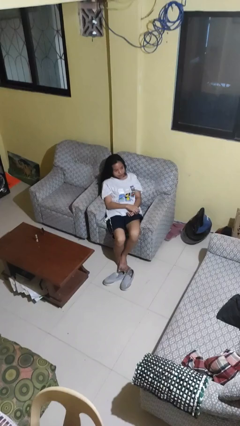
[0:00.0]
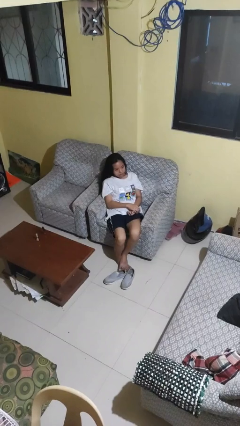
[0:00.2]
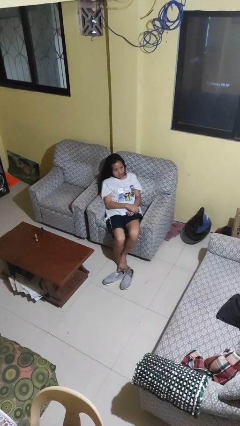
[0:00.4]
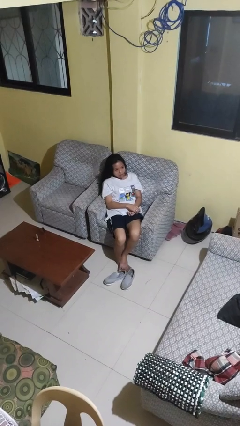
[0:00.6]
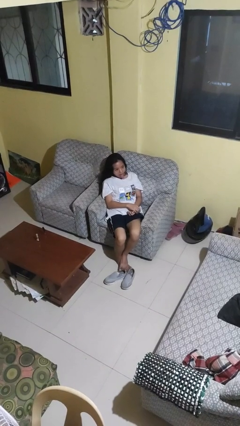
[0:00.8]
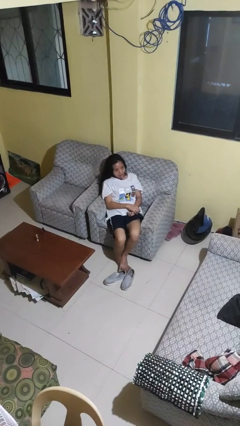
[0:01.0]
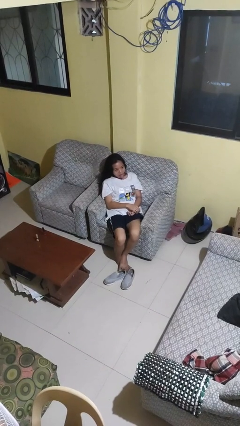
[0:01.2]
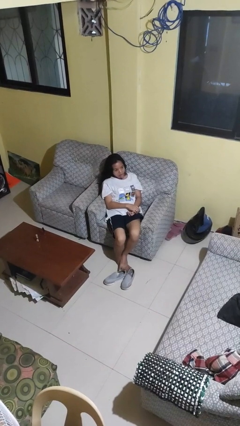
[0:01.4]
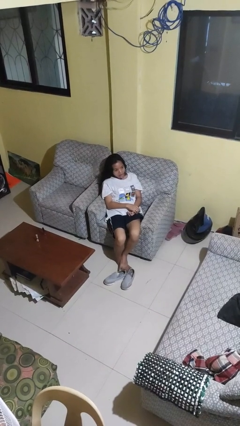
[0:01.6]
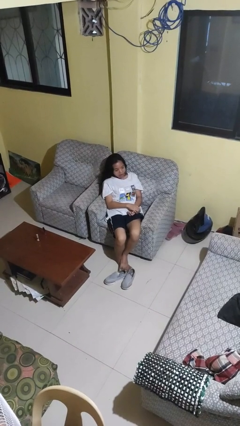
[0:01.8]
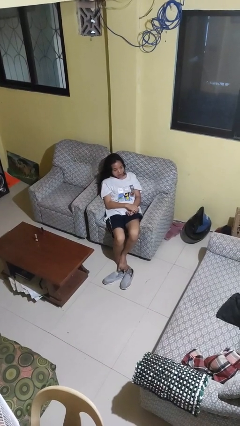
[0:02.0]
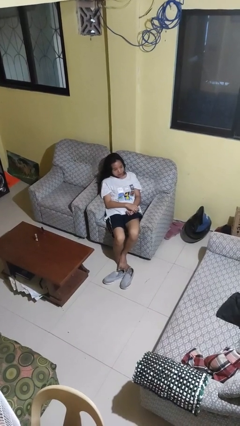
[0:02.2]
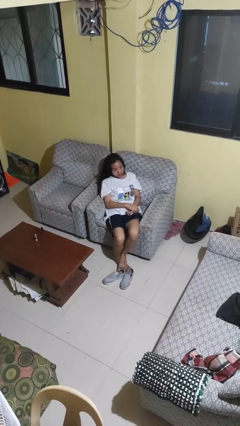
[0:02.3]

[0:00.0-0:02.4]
person sticks out tongue

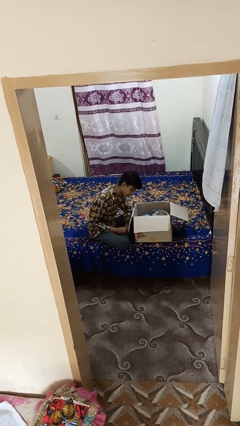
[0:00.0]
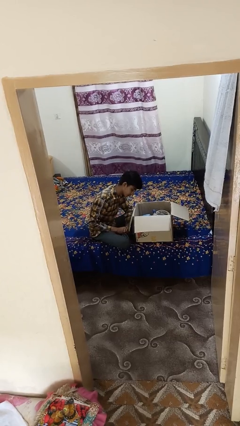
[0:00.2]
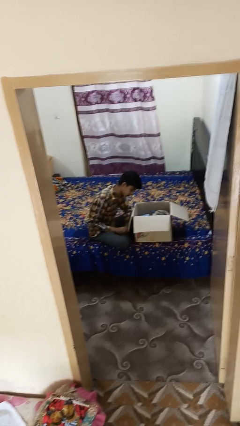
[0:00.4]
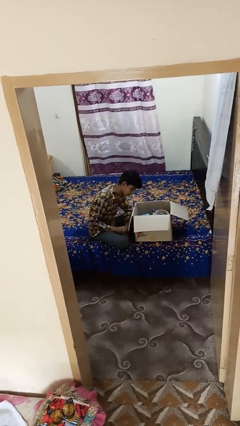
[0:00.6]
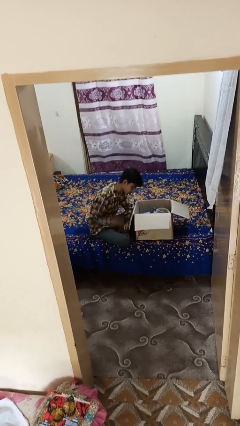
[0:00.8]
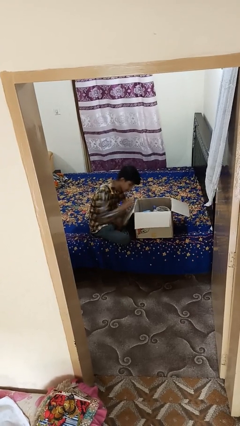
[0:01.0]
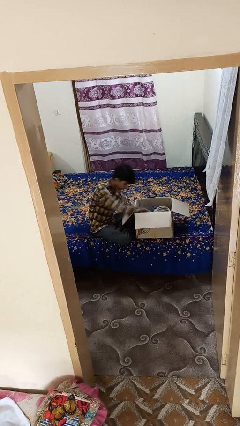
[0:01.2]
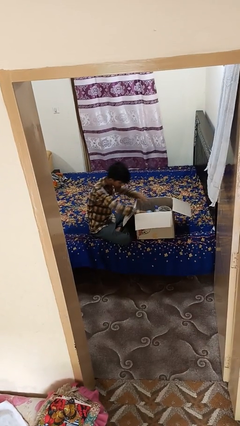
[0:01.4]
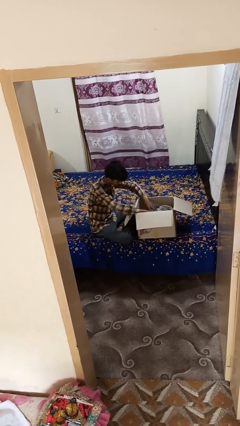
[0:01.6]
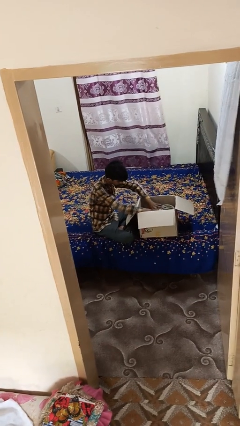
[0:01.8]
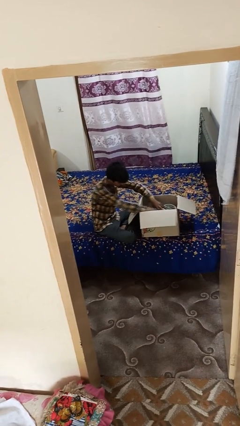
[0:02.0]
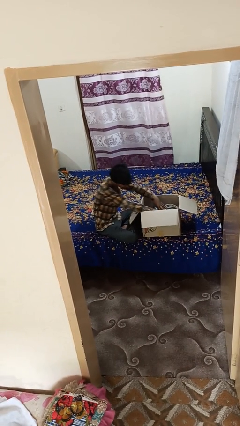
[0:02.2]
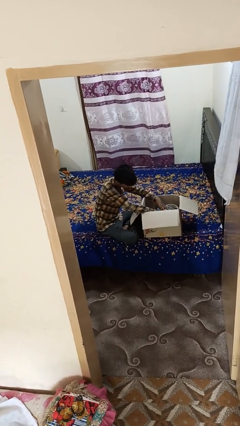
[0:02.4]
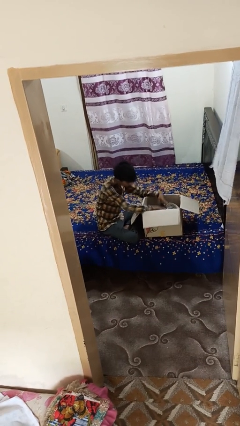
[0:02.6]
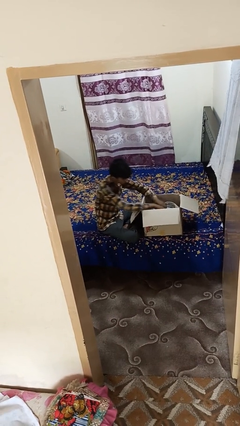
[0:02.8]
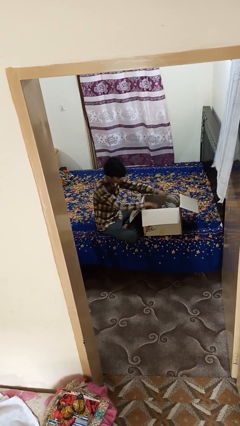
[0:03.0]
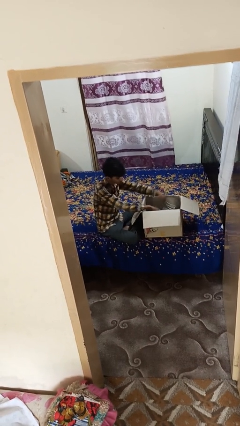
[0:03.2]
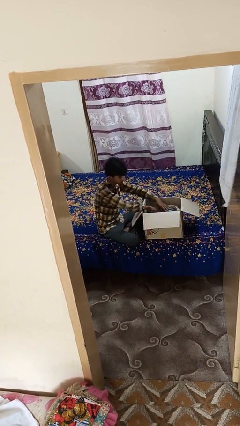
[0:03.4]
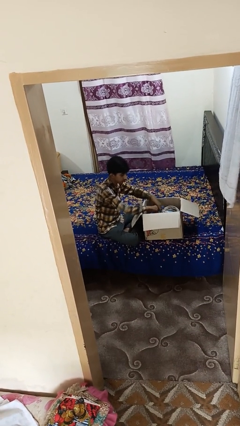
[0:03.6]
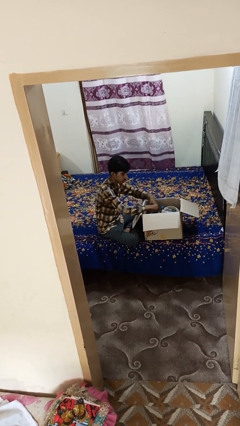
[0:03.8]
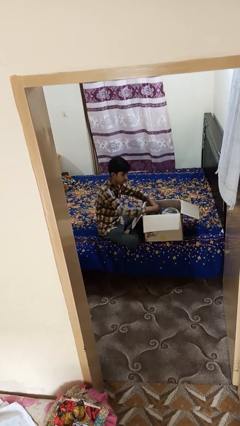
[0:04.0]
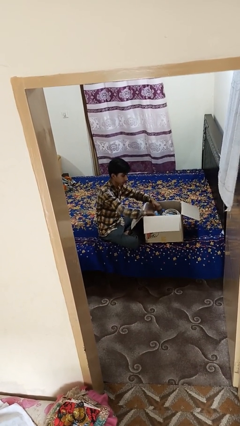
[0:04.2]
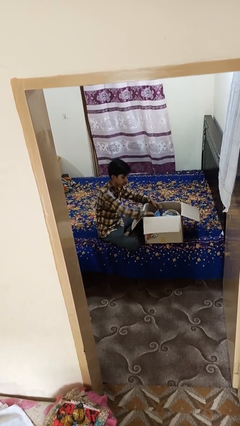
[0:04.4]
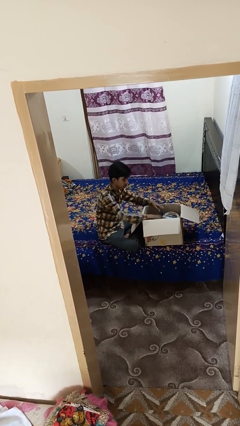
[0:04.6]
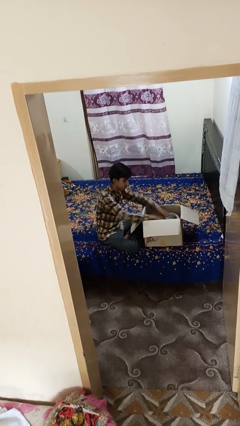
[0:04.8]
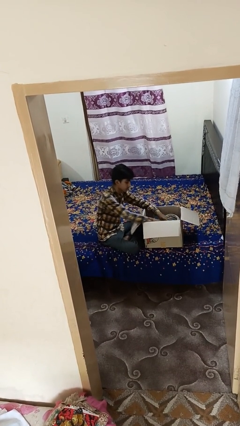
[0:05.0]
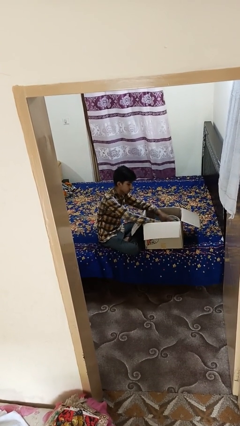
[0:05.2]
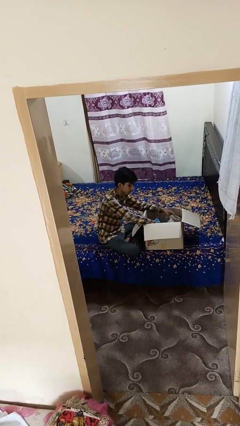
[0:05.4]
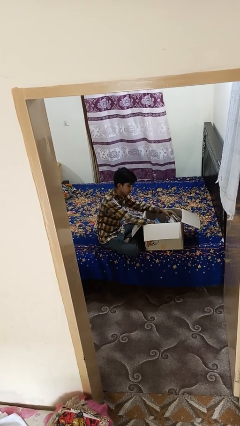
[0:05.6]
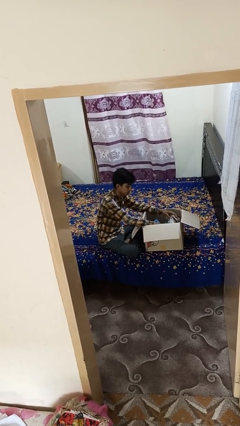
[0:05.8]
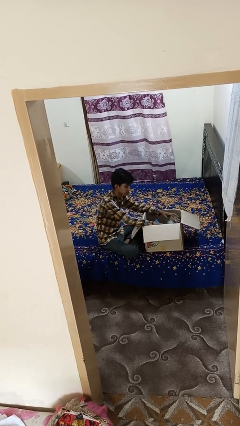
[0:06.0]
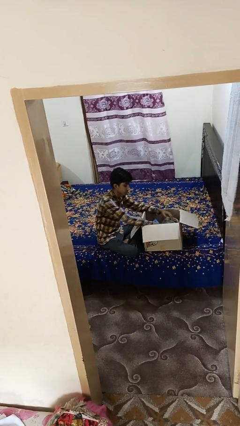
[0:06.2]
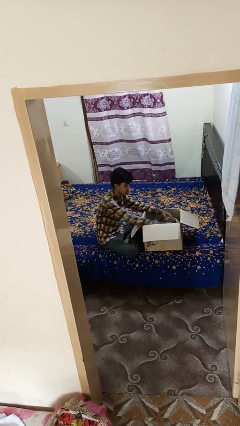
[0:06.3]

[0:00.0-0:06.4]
person searches in box

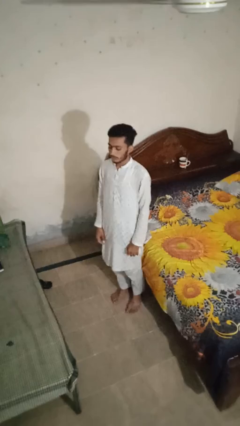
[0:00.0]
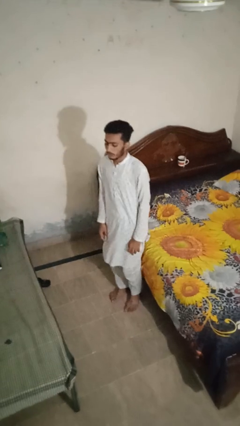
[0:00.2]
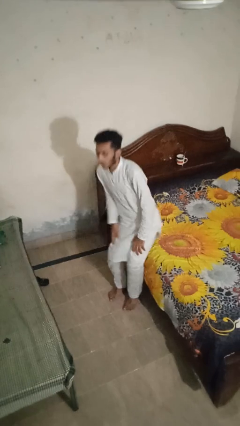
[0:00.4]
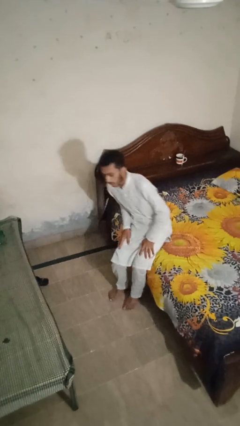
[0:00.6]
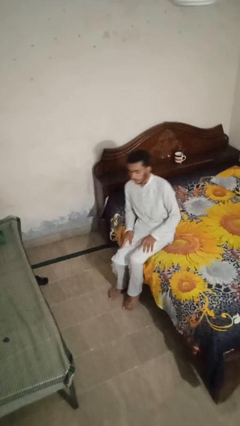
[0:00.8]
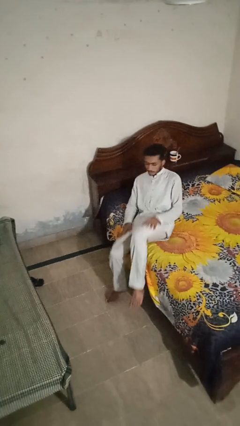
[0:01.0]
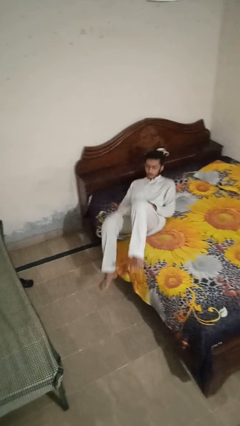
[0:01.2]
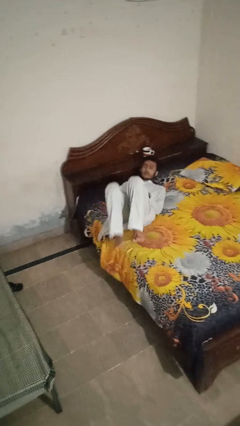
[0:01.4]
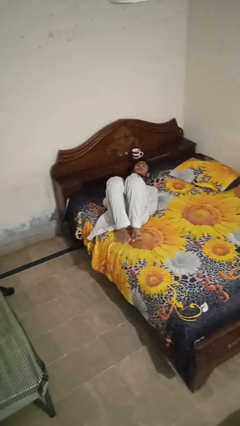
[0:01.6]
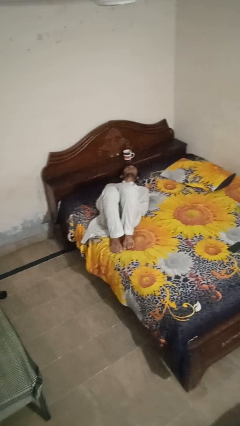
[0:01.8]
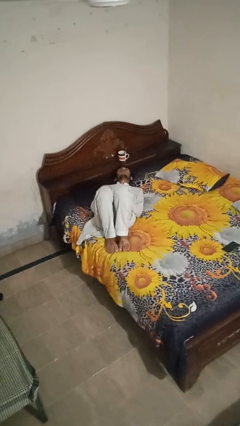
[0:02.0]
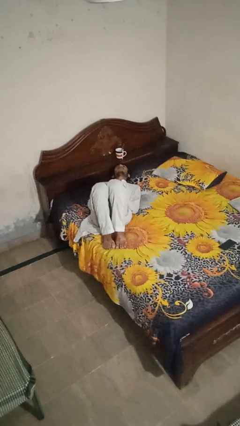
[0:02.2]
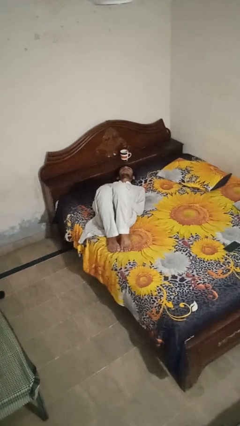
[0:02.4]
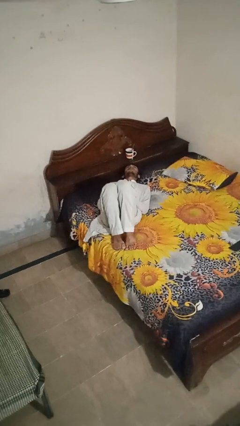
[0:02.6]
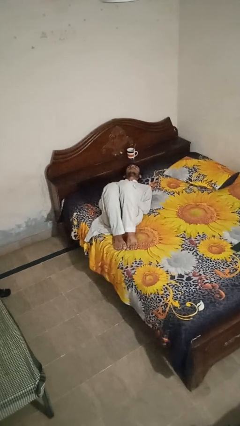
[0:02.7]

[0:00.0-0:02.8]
person lies down on bed

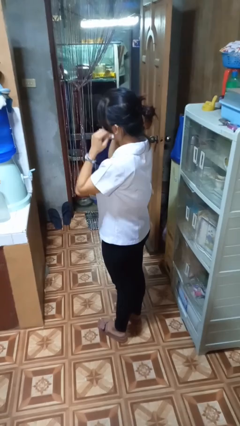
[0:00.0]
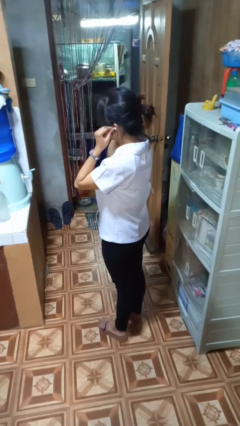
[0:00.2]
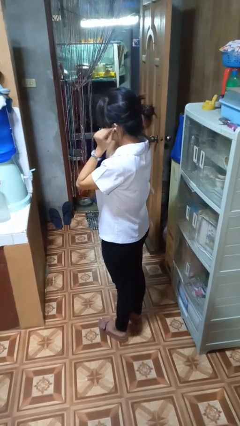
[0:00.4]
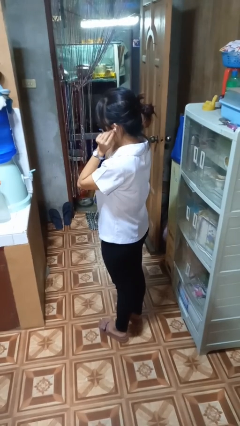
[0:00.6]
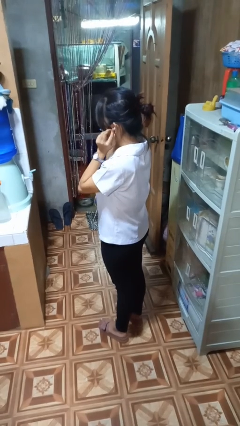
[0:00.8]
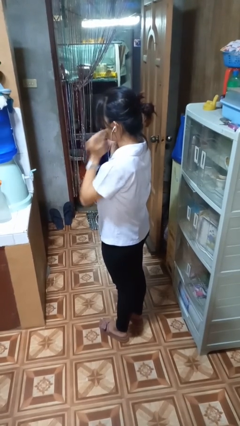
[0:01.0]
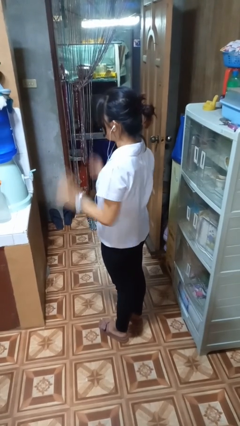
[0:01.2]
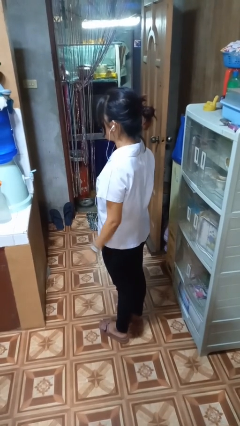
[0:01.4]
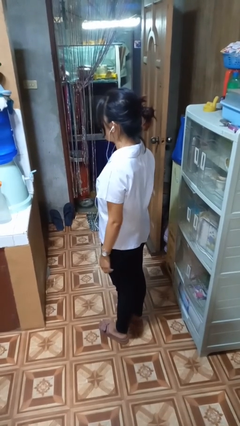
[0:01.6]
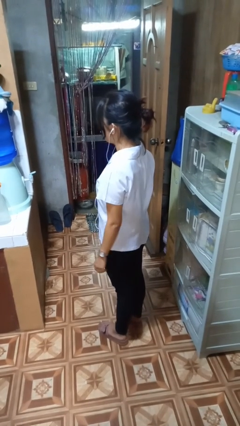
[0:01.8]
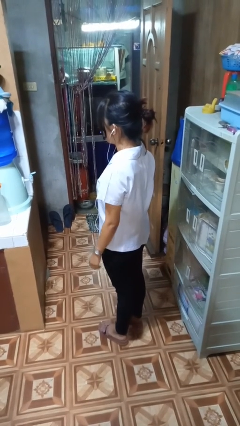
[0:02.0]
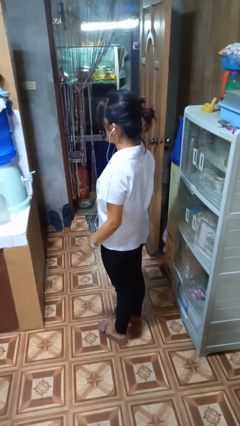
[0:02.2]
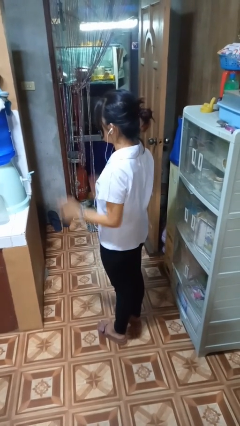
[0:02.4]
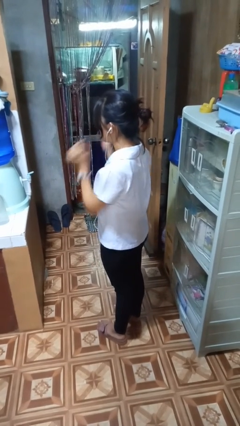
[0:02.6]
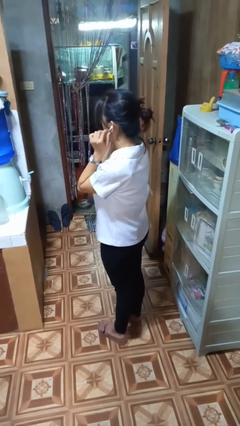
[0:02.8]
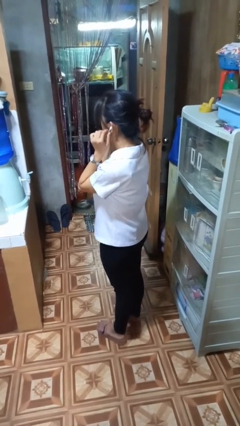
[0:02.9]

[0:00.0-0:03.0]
person puts on headphones

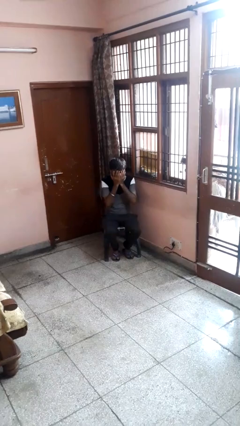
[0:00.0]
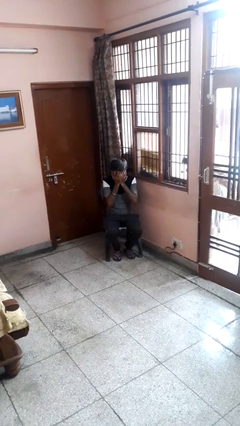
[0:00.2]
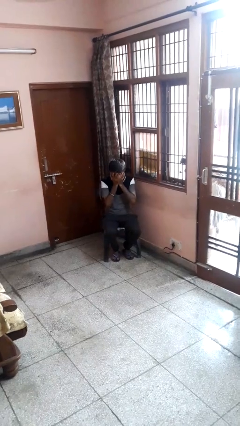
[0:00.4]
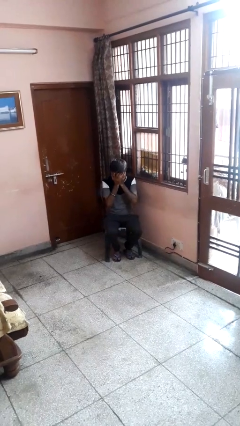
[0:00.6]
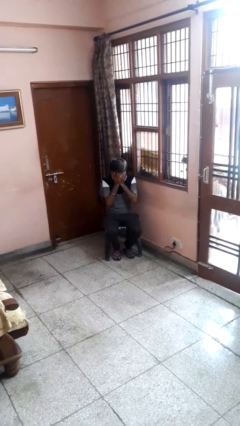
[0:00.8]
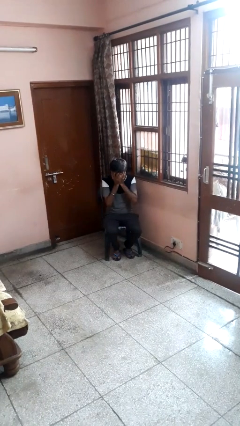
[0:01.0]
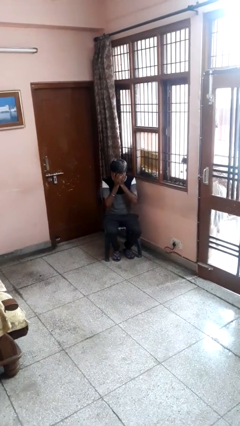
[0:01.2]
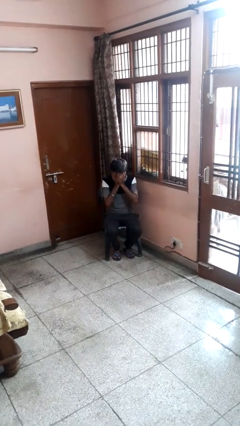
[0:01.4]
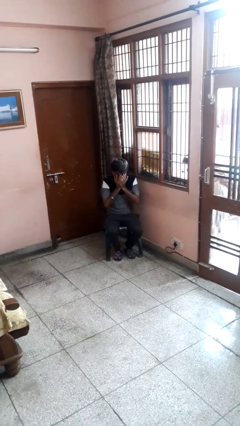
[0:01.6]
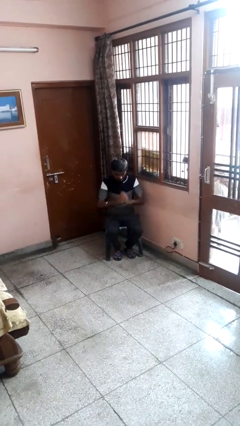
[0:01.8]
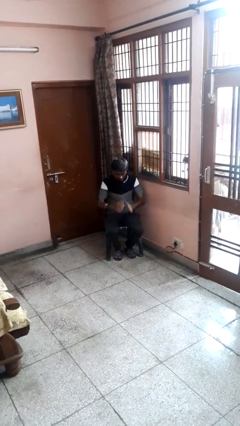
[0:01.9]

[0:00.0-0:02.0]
person covers face with hands

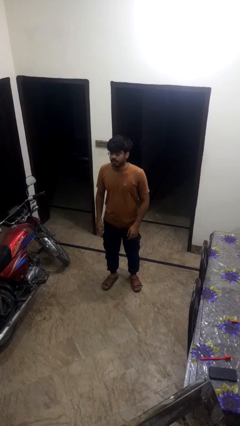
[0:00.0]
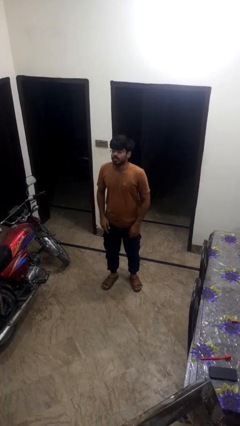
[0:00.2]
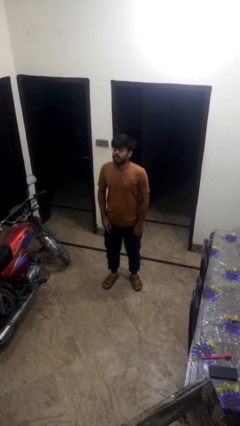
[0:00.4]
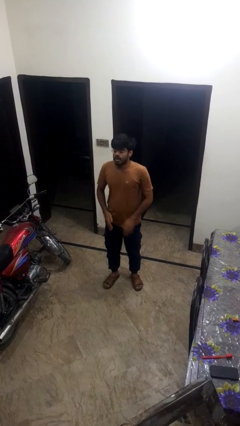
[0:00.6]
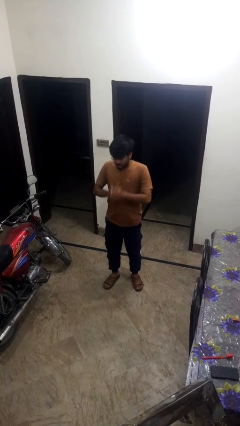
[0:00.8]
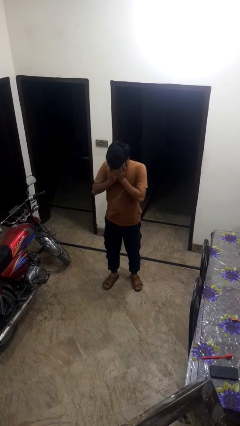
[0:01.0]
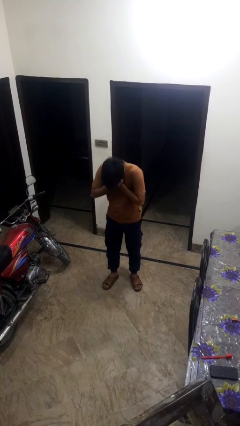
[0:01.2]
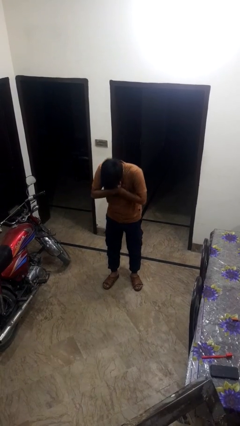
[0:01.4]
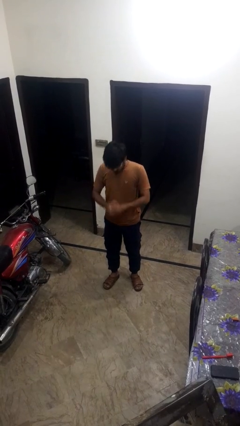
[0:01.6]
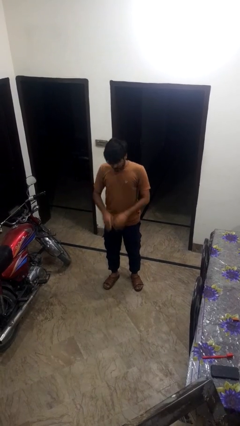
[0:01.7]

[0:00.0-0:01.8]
person sneezes into hand
